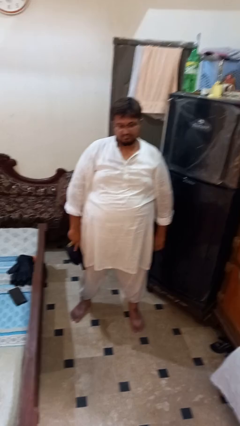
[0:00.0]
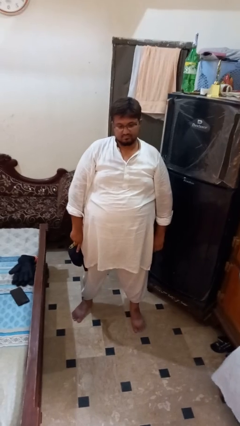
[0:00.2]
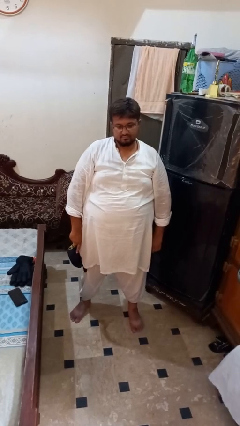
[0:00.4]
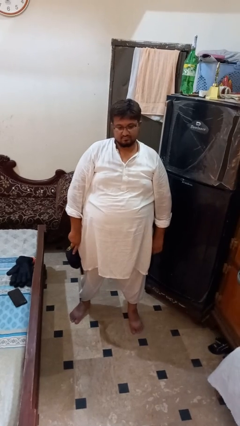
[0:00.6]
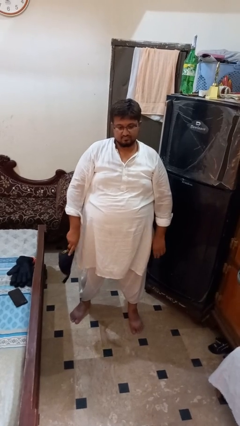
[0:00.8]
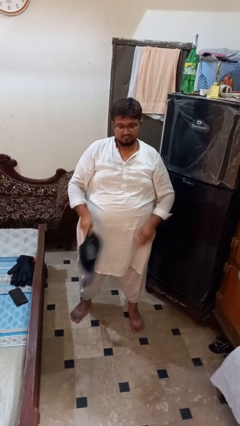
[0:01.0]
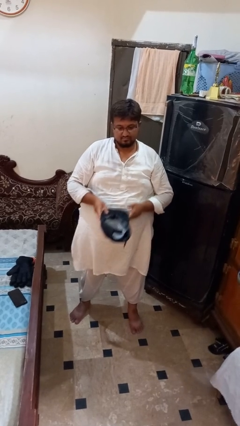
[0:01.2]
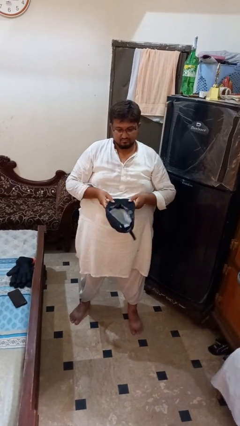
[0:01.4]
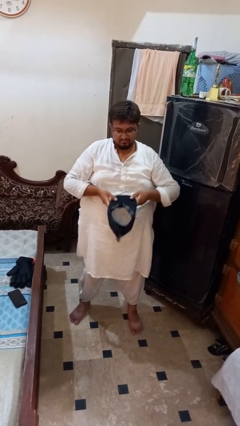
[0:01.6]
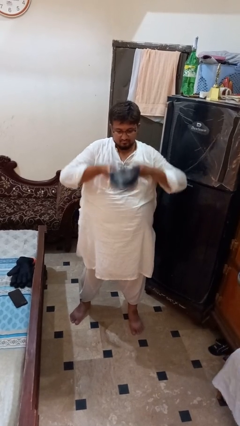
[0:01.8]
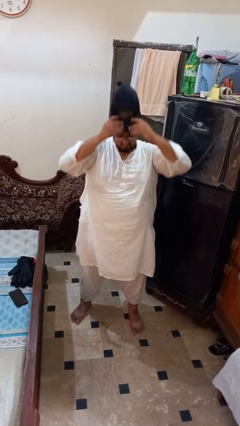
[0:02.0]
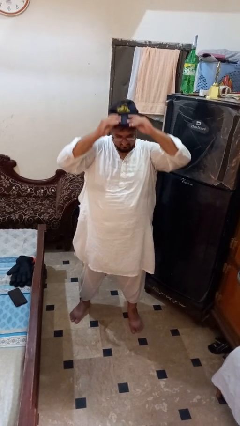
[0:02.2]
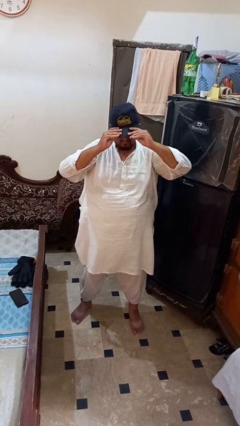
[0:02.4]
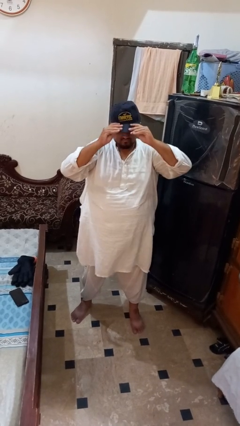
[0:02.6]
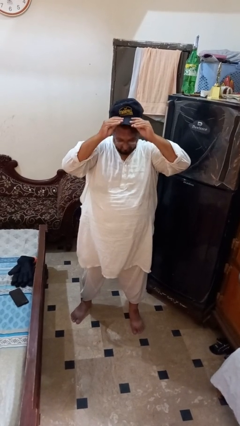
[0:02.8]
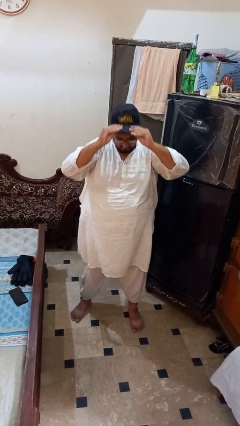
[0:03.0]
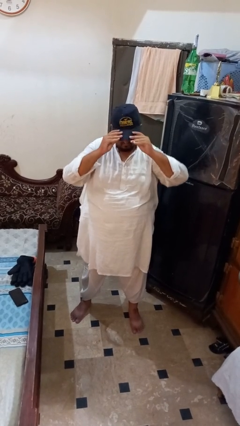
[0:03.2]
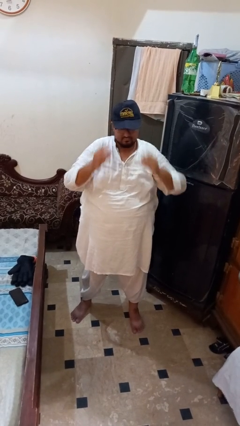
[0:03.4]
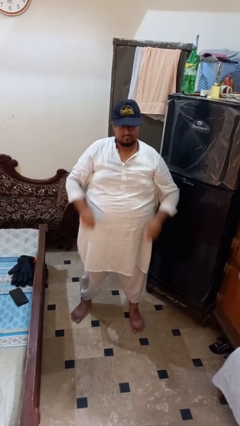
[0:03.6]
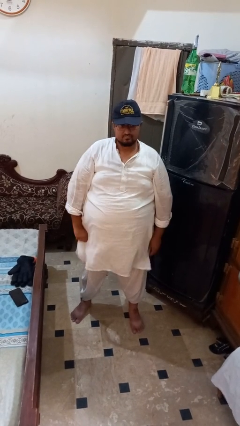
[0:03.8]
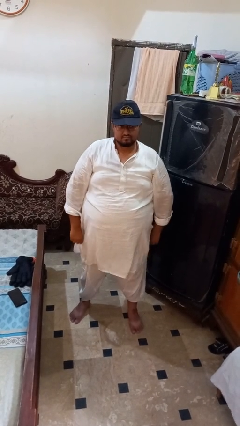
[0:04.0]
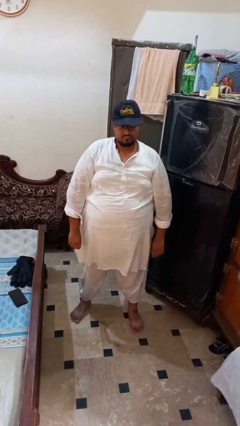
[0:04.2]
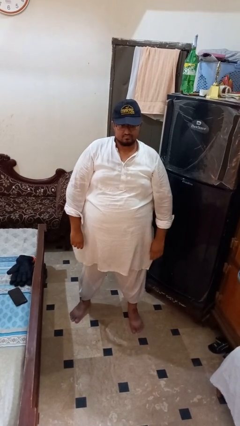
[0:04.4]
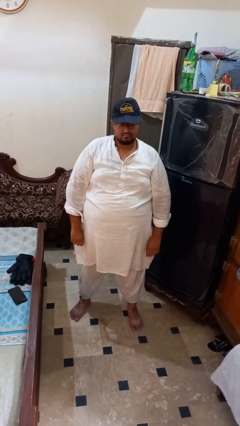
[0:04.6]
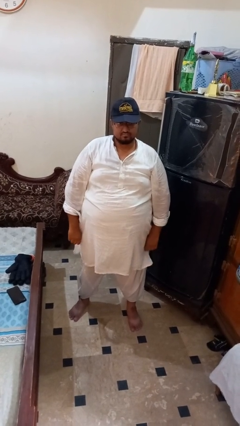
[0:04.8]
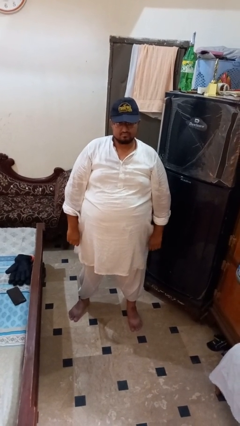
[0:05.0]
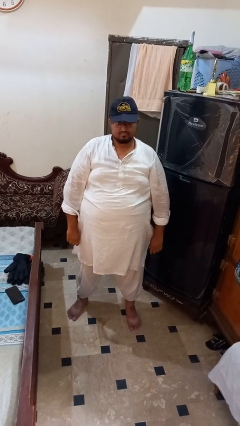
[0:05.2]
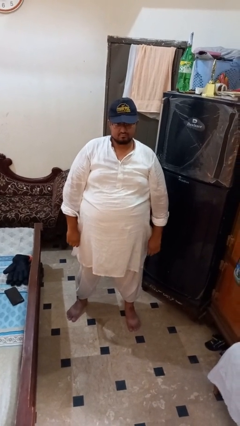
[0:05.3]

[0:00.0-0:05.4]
person puts on hat

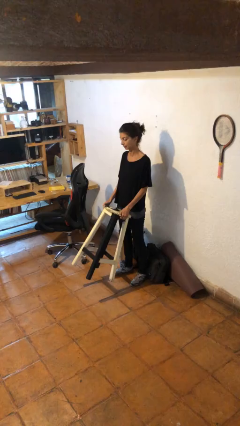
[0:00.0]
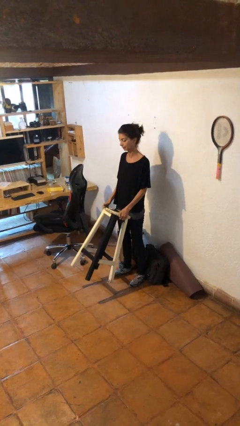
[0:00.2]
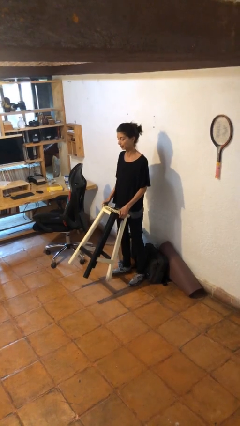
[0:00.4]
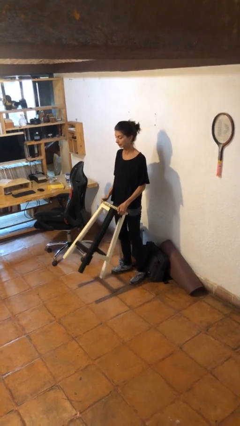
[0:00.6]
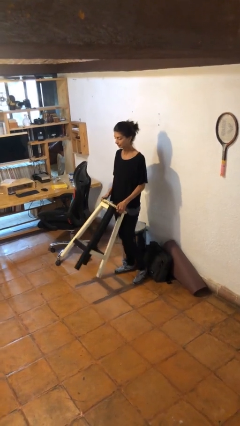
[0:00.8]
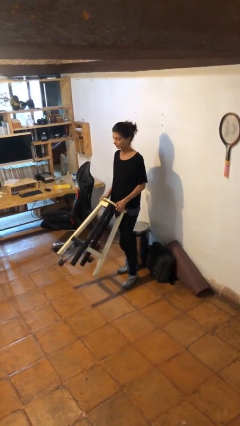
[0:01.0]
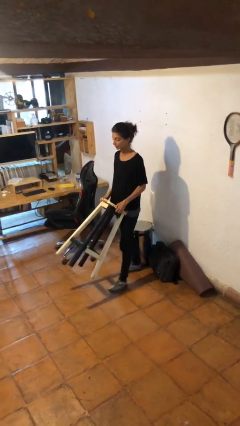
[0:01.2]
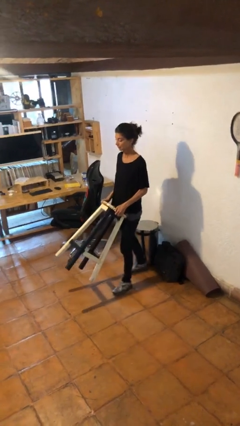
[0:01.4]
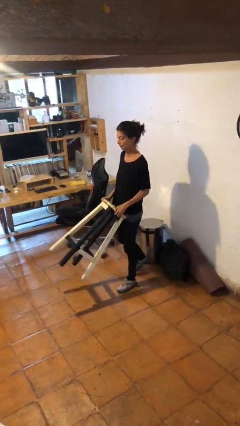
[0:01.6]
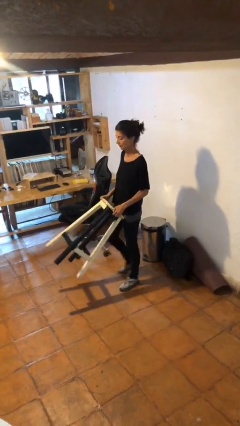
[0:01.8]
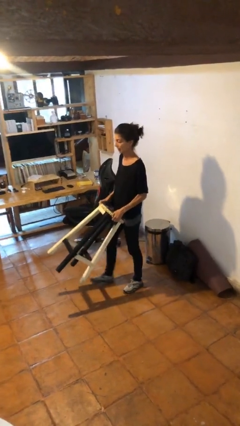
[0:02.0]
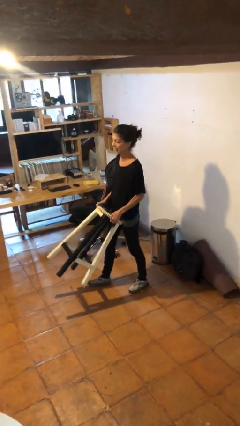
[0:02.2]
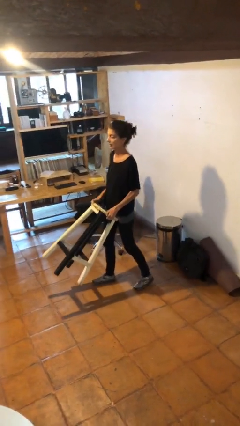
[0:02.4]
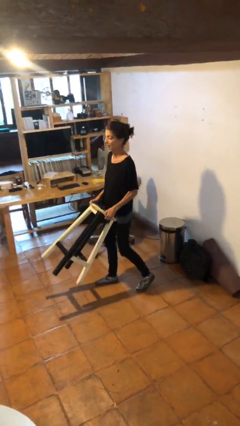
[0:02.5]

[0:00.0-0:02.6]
person carries furniture

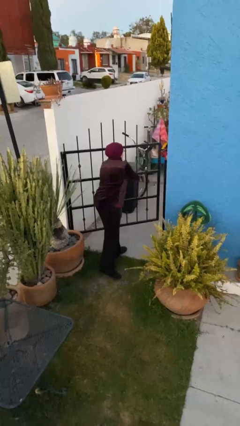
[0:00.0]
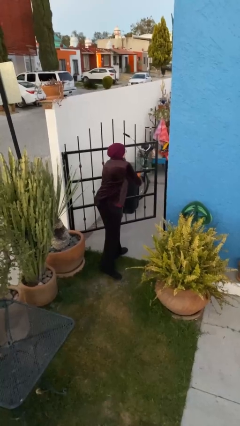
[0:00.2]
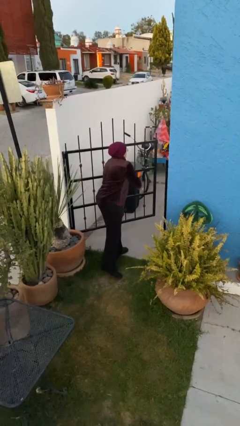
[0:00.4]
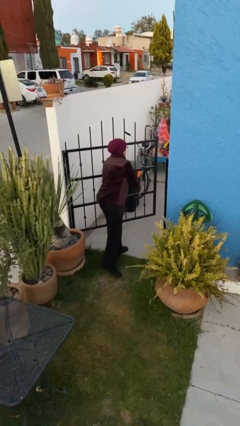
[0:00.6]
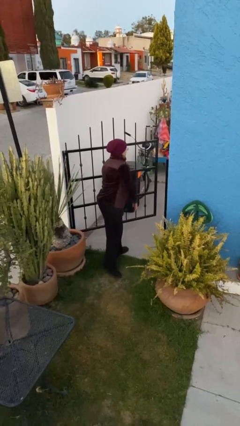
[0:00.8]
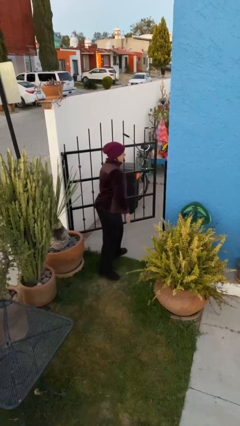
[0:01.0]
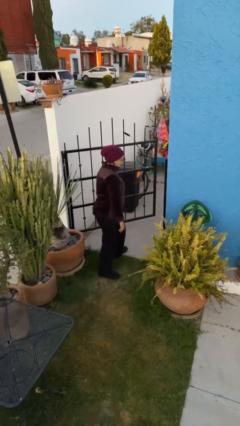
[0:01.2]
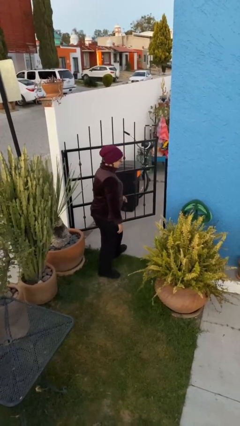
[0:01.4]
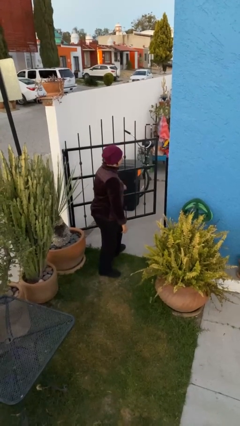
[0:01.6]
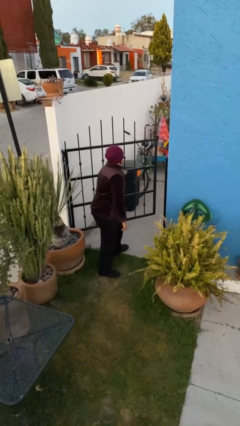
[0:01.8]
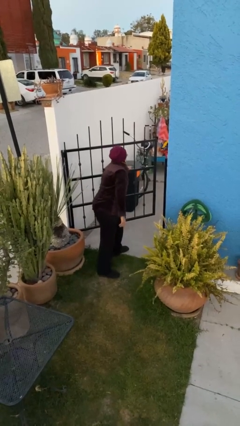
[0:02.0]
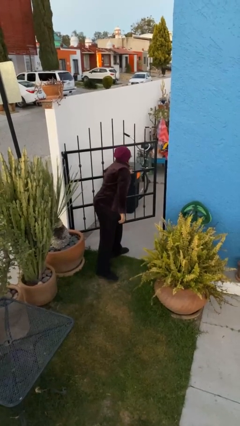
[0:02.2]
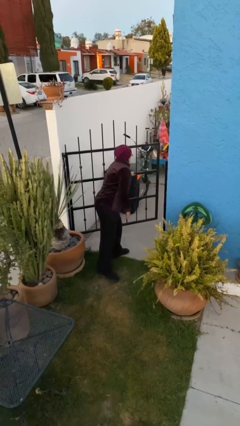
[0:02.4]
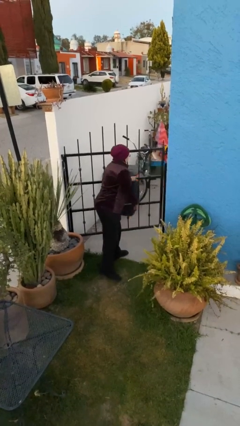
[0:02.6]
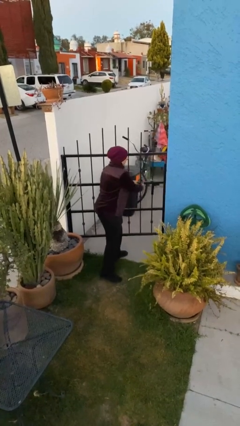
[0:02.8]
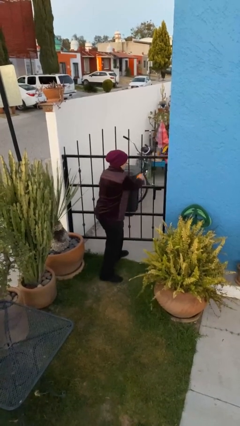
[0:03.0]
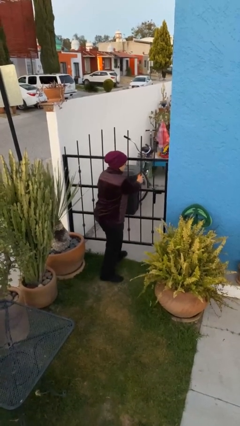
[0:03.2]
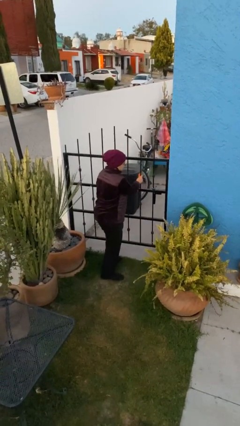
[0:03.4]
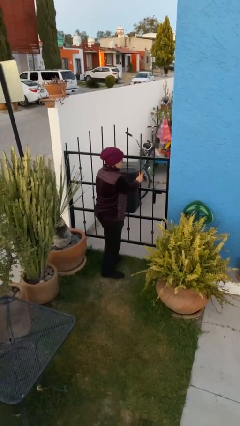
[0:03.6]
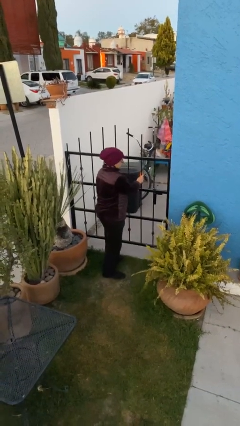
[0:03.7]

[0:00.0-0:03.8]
person closes facility door

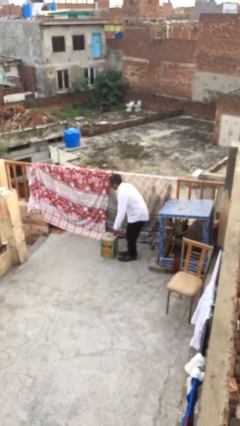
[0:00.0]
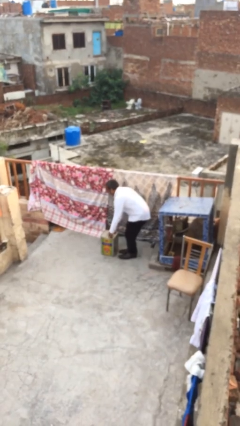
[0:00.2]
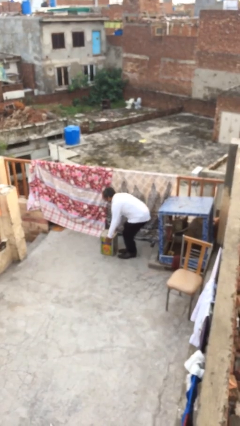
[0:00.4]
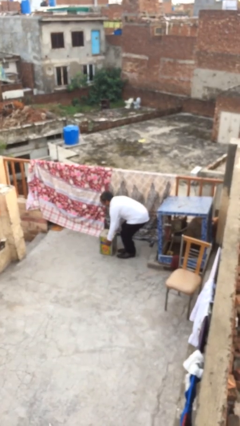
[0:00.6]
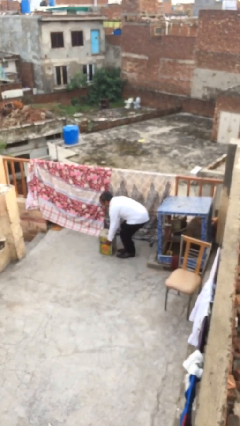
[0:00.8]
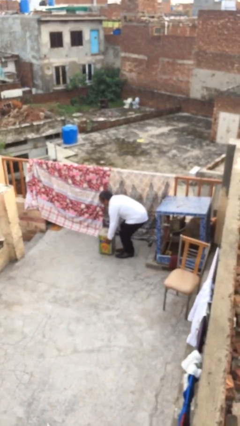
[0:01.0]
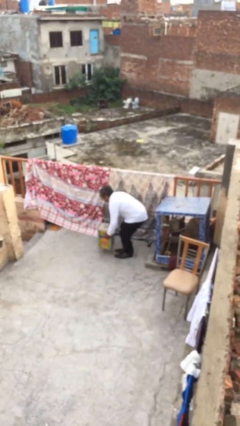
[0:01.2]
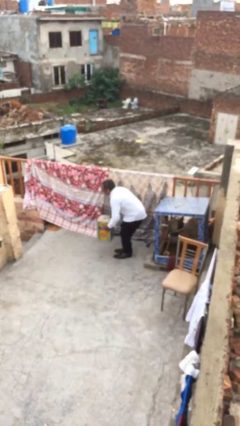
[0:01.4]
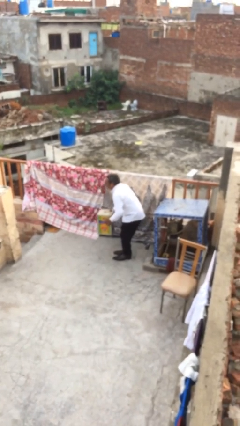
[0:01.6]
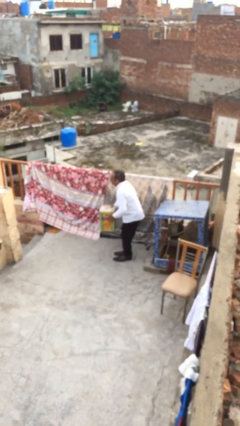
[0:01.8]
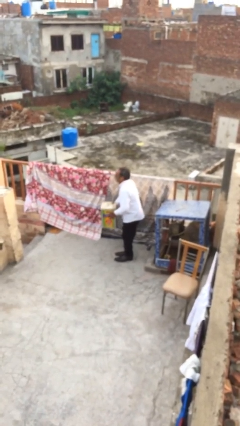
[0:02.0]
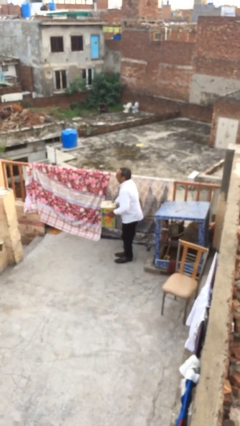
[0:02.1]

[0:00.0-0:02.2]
person picks up object from floor

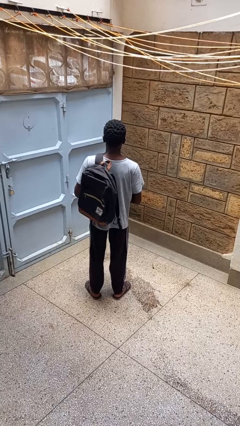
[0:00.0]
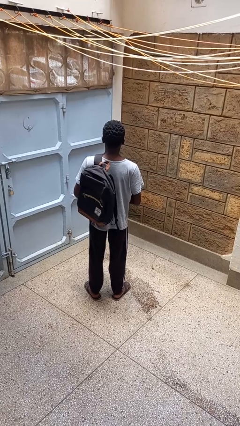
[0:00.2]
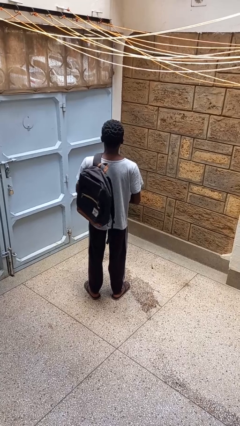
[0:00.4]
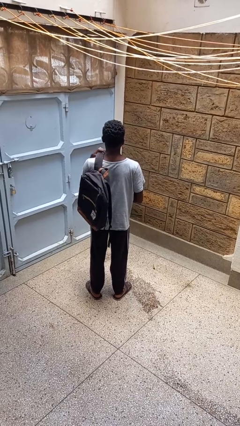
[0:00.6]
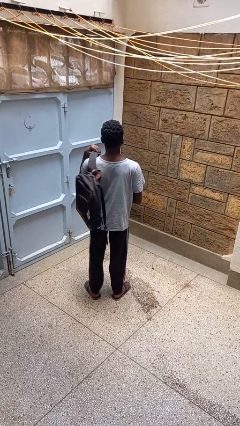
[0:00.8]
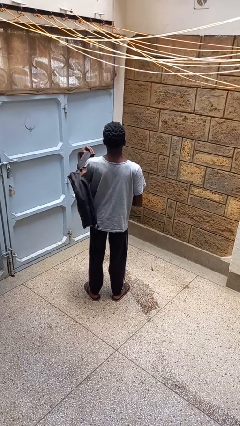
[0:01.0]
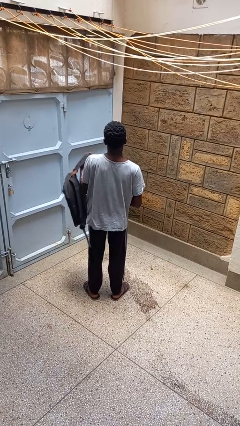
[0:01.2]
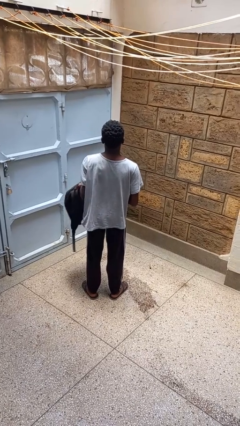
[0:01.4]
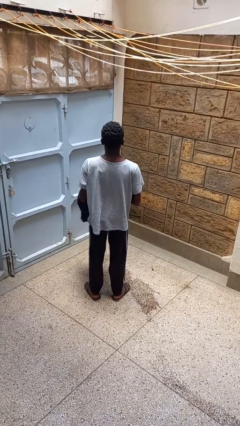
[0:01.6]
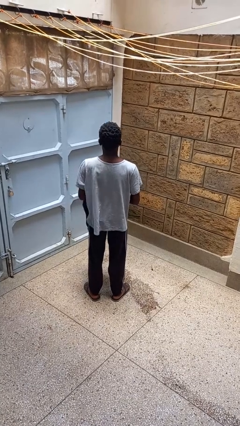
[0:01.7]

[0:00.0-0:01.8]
person takes off backpack

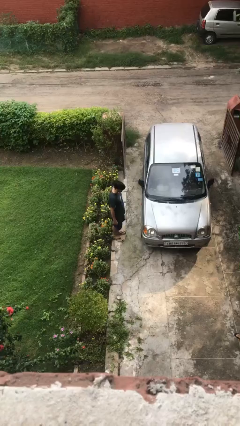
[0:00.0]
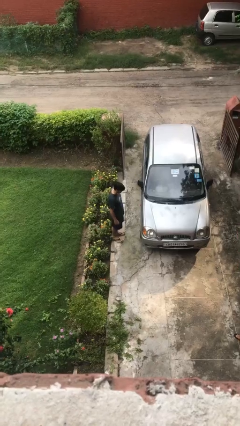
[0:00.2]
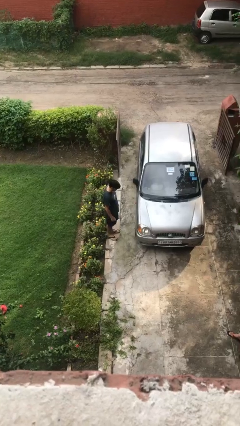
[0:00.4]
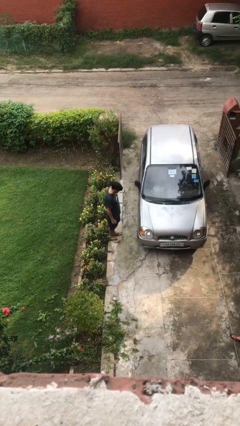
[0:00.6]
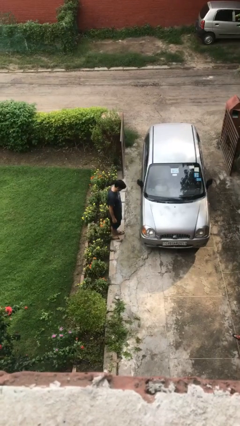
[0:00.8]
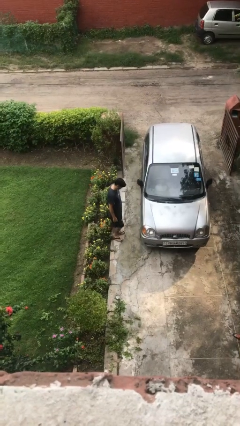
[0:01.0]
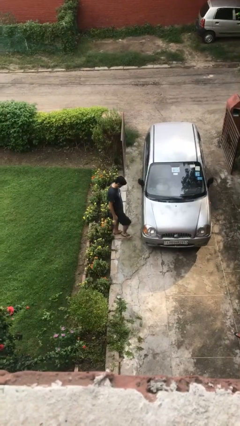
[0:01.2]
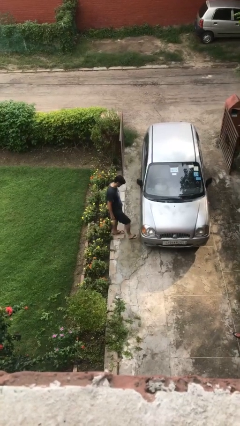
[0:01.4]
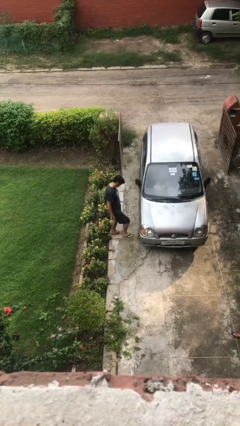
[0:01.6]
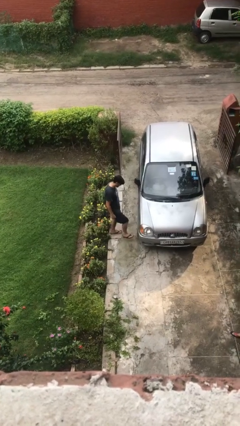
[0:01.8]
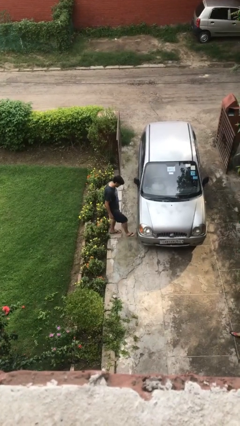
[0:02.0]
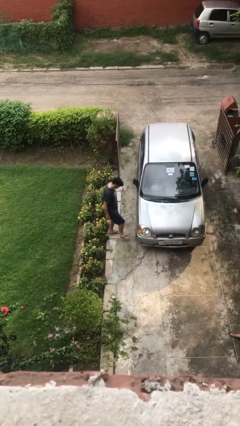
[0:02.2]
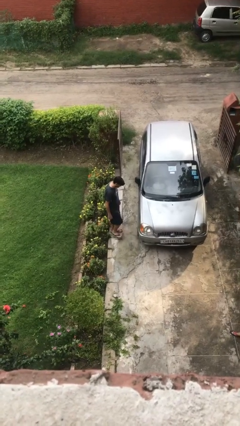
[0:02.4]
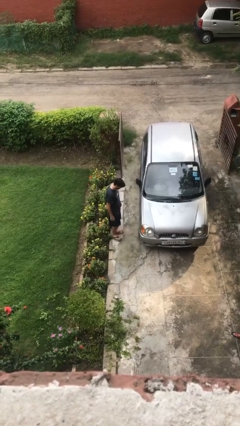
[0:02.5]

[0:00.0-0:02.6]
person kicks car tires
